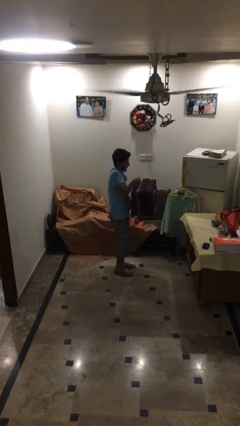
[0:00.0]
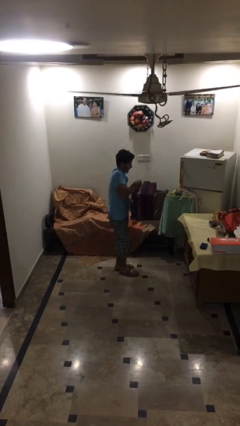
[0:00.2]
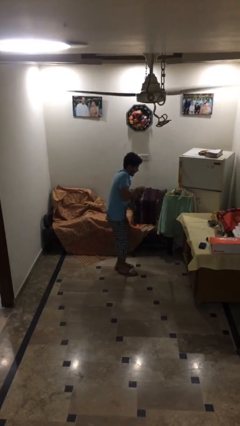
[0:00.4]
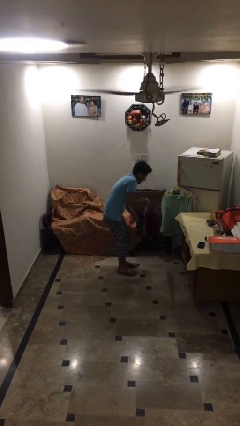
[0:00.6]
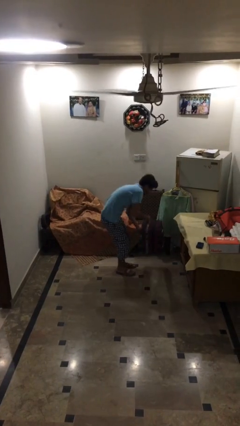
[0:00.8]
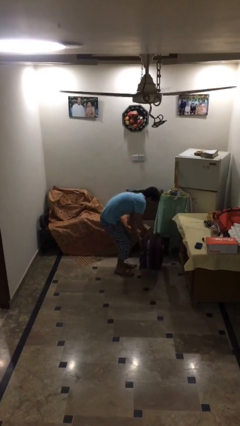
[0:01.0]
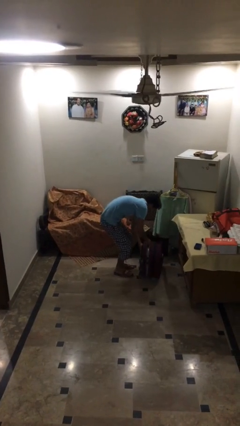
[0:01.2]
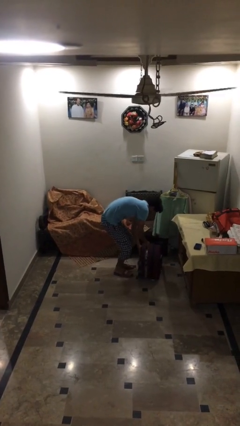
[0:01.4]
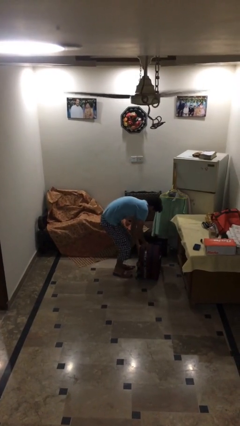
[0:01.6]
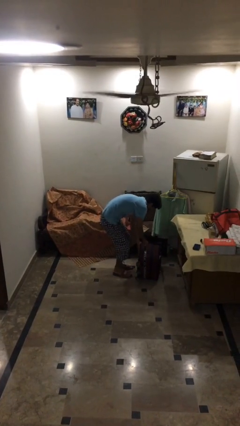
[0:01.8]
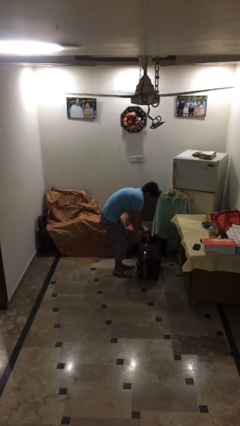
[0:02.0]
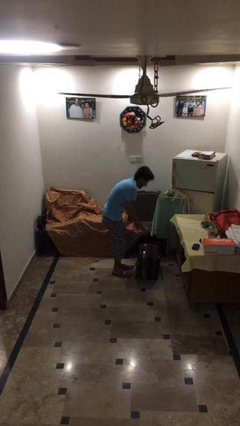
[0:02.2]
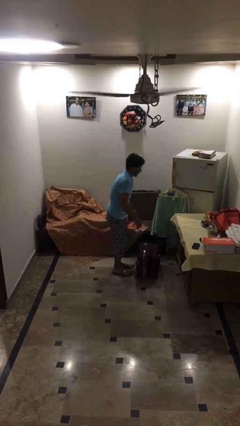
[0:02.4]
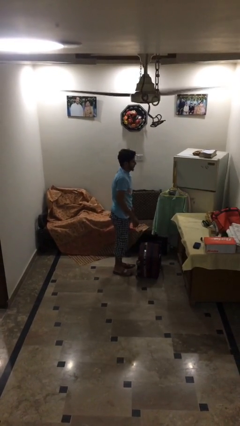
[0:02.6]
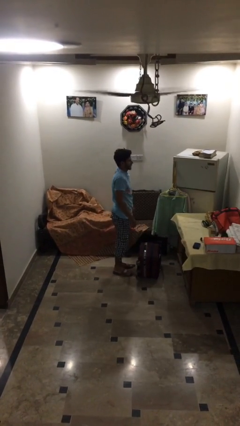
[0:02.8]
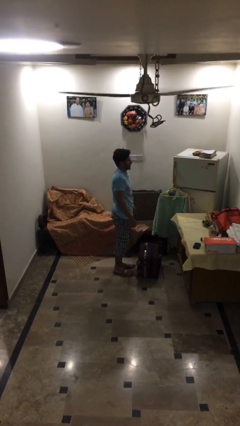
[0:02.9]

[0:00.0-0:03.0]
person puts down object on floor

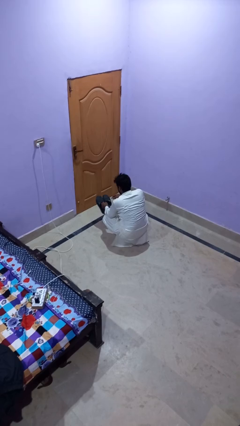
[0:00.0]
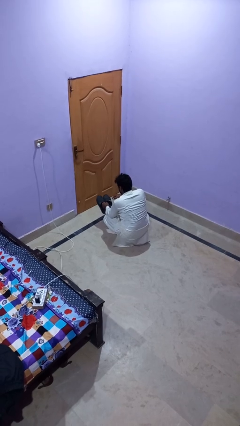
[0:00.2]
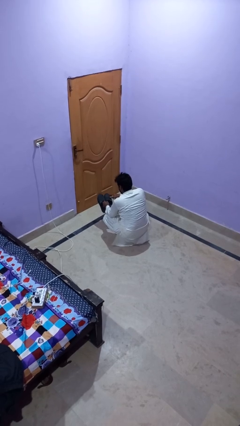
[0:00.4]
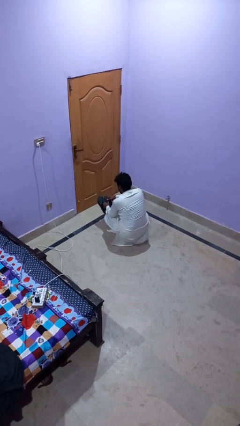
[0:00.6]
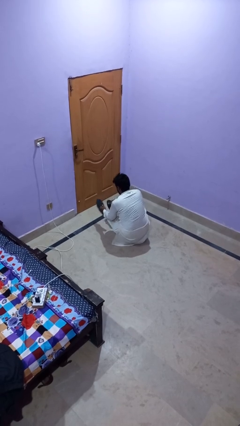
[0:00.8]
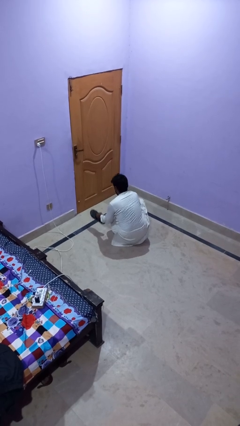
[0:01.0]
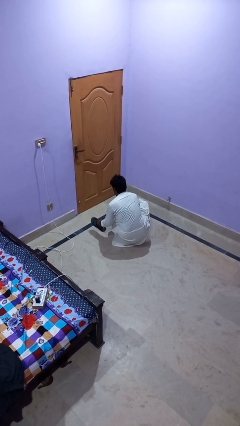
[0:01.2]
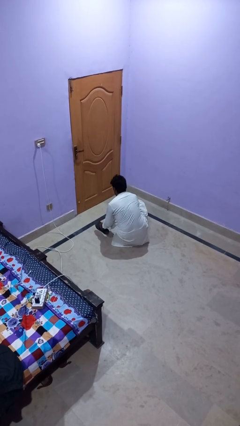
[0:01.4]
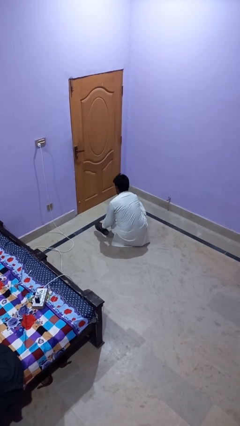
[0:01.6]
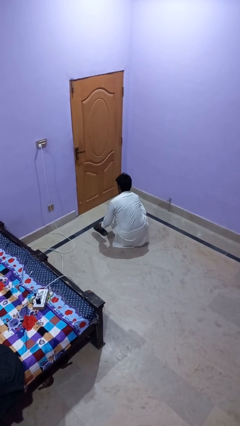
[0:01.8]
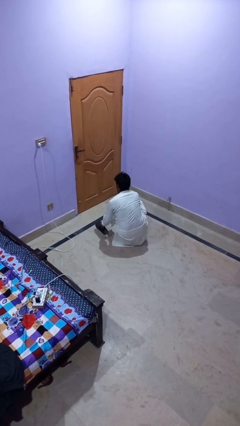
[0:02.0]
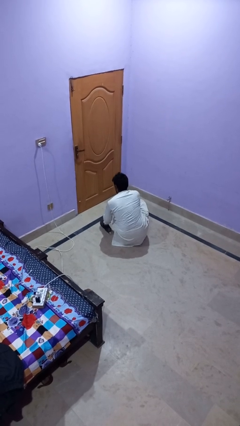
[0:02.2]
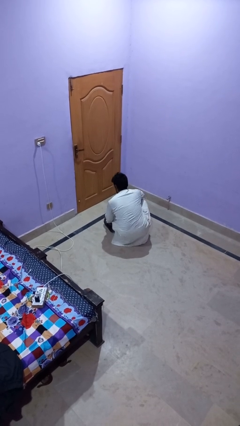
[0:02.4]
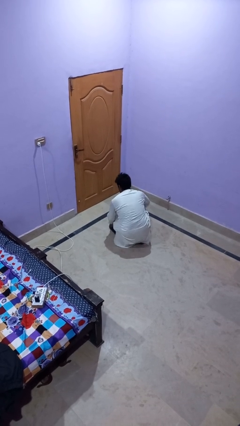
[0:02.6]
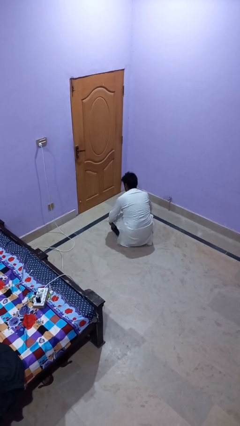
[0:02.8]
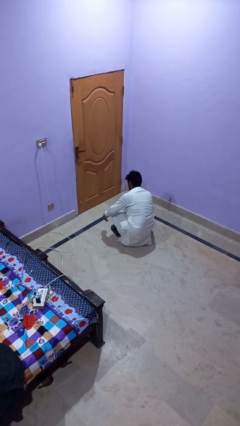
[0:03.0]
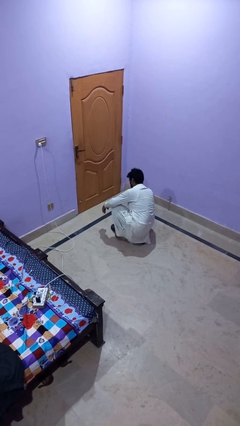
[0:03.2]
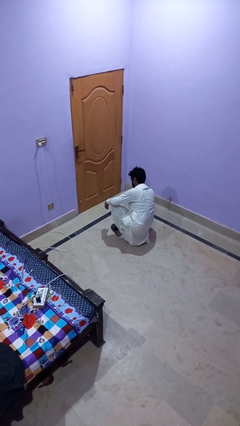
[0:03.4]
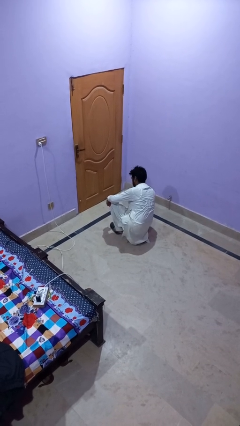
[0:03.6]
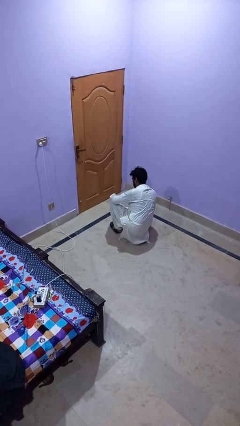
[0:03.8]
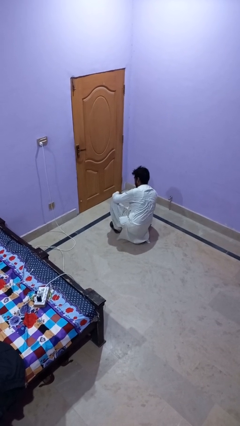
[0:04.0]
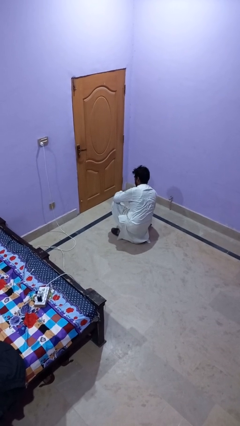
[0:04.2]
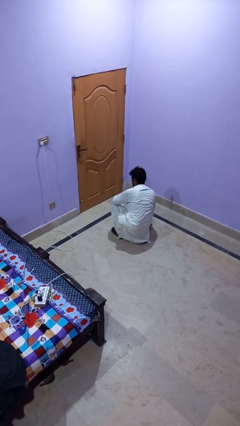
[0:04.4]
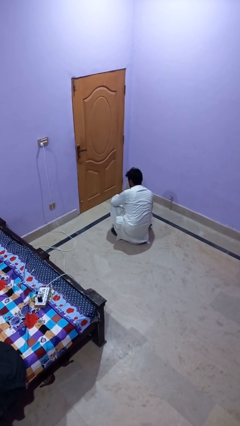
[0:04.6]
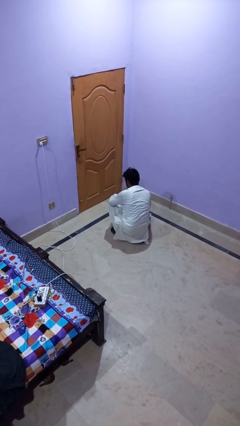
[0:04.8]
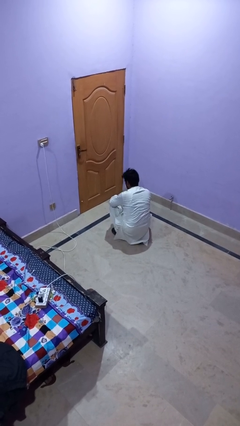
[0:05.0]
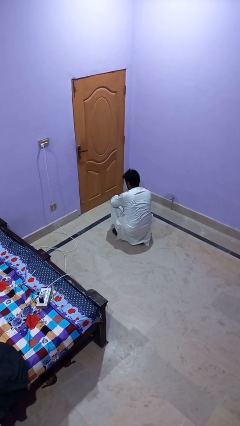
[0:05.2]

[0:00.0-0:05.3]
person puts on shoes

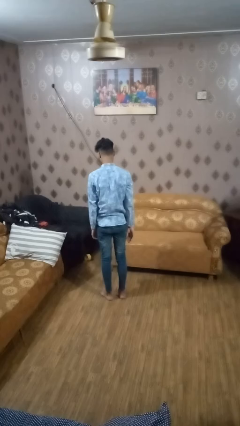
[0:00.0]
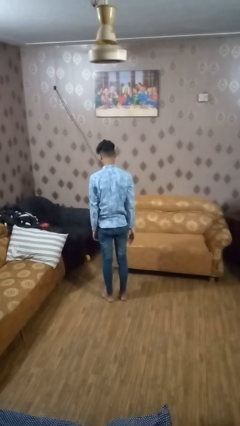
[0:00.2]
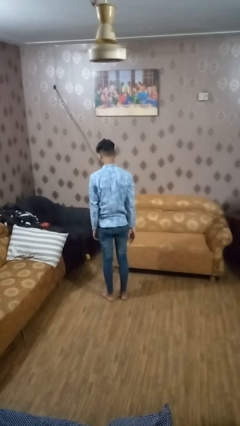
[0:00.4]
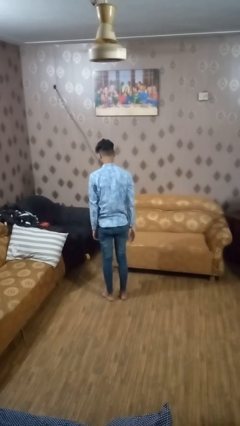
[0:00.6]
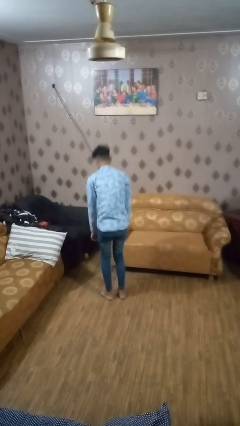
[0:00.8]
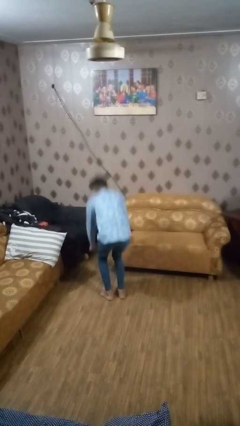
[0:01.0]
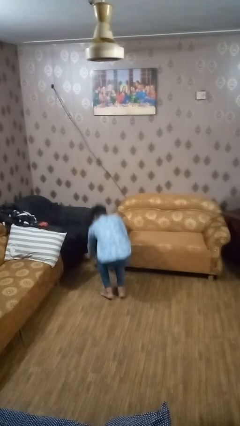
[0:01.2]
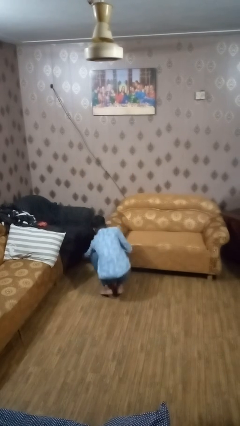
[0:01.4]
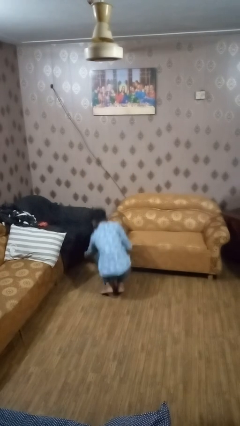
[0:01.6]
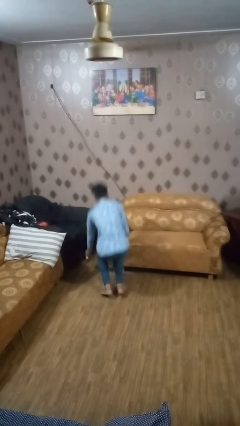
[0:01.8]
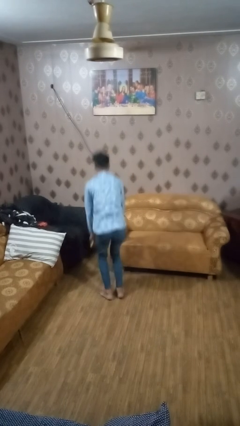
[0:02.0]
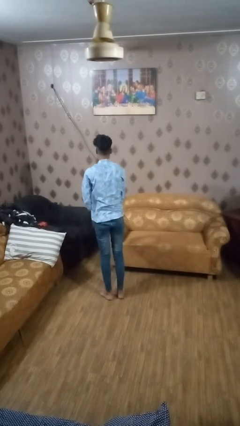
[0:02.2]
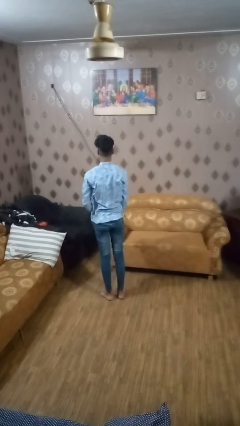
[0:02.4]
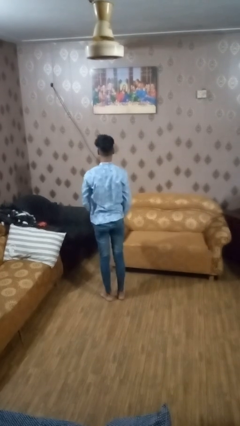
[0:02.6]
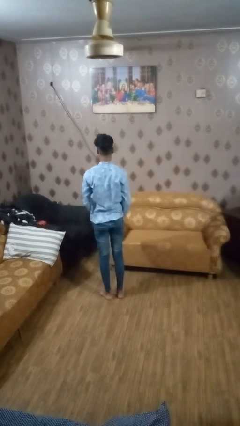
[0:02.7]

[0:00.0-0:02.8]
person picks up object from floor

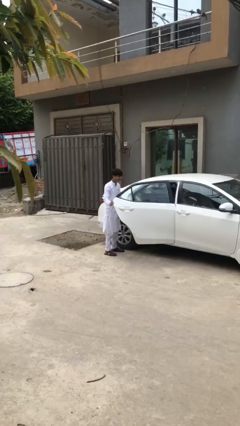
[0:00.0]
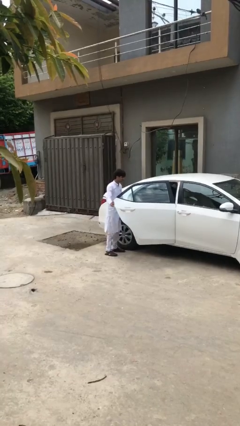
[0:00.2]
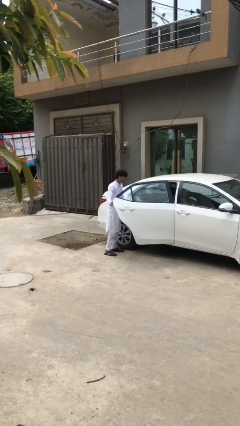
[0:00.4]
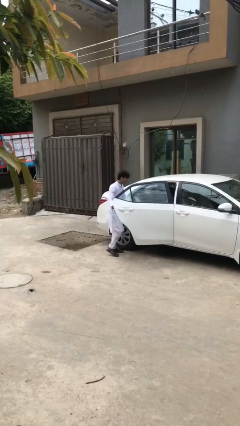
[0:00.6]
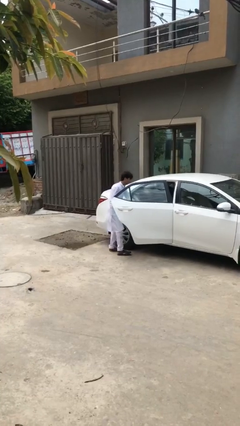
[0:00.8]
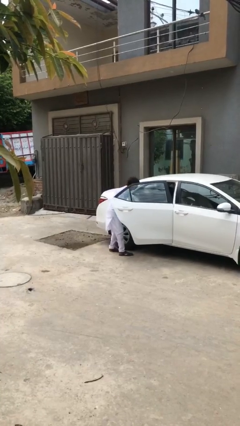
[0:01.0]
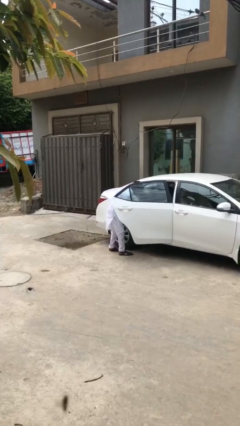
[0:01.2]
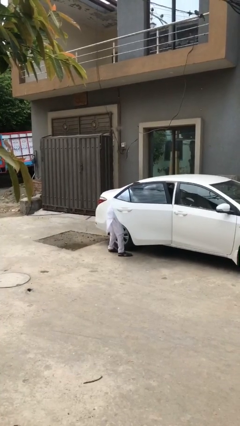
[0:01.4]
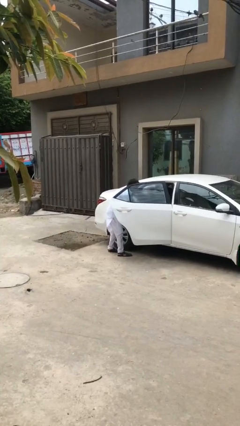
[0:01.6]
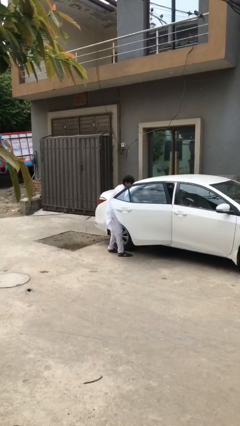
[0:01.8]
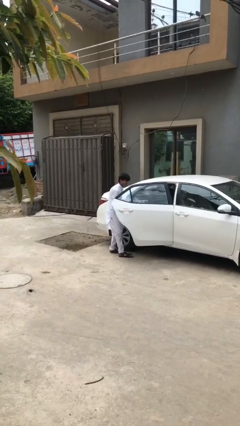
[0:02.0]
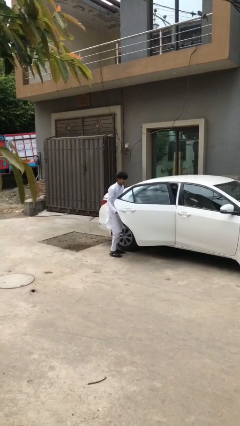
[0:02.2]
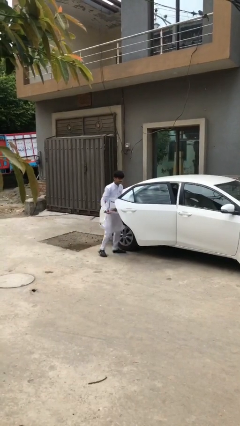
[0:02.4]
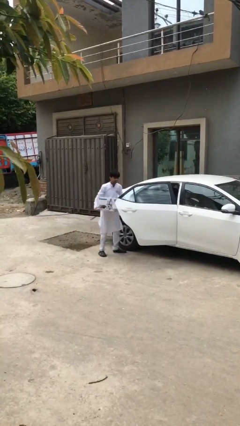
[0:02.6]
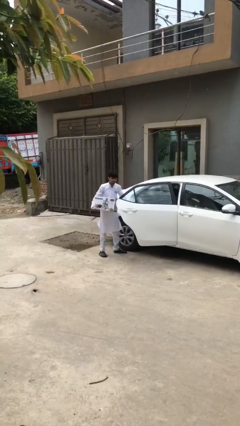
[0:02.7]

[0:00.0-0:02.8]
person unloads car

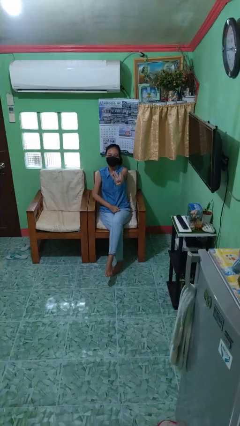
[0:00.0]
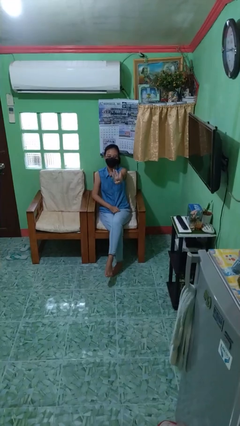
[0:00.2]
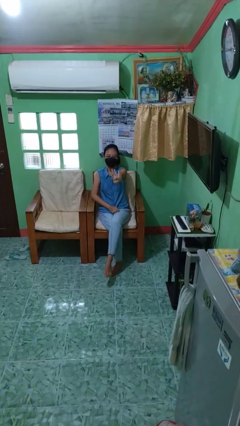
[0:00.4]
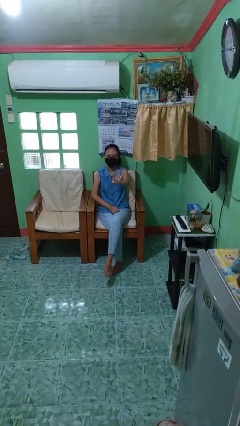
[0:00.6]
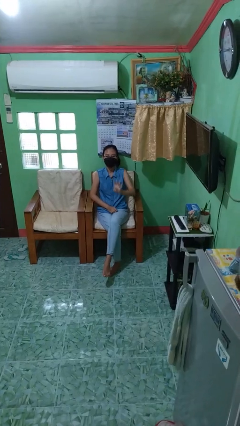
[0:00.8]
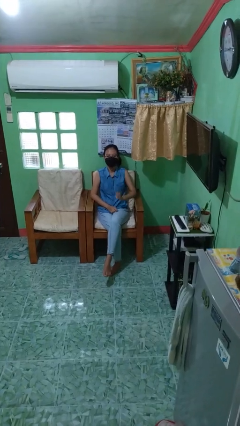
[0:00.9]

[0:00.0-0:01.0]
person gestures number four

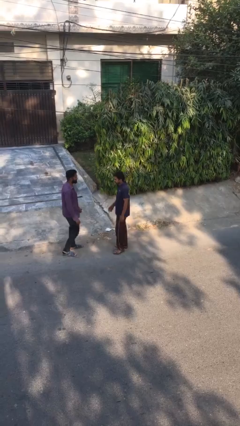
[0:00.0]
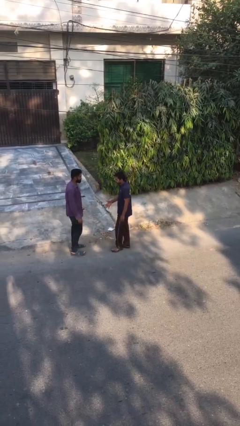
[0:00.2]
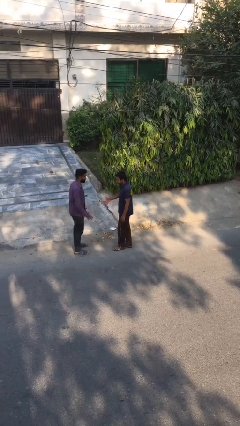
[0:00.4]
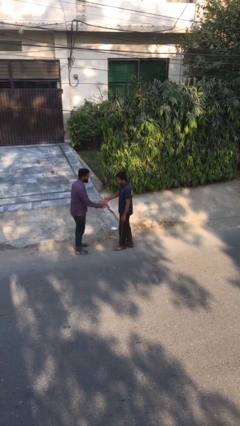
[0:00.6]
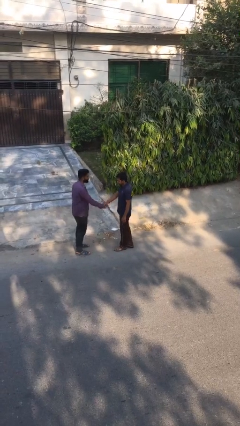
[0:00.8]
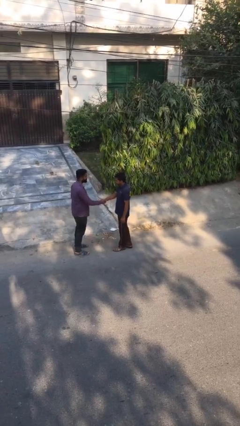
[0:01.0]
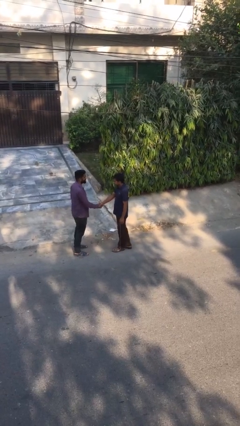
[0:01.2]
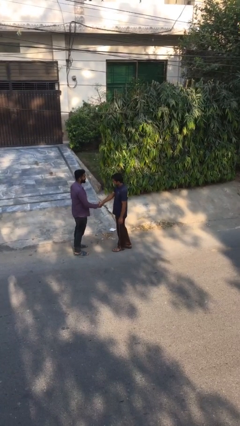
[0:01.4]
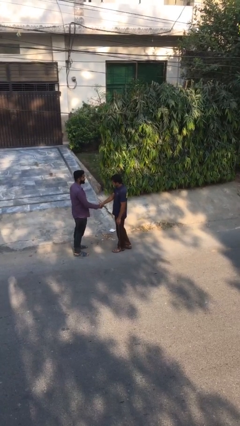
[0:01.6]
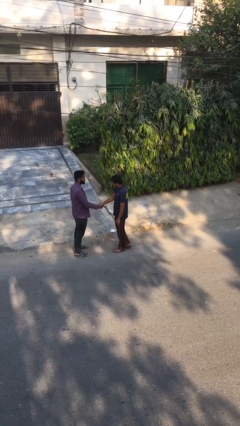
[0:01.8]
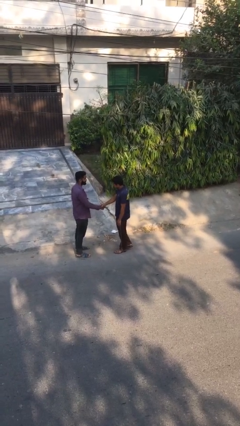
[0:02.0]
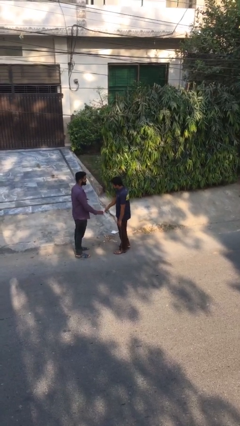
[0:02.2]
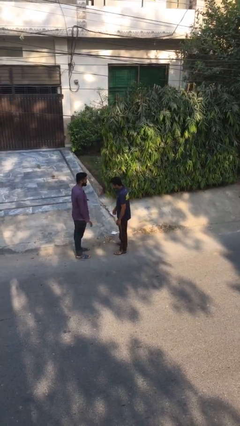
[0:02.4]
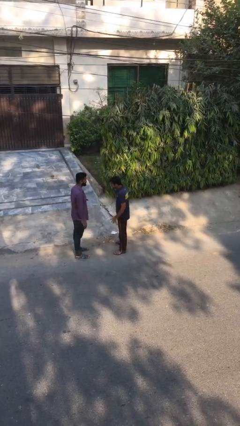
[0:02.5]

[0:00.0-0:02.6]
person shakes hand

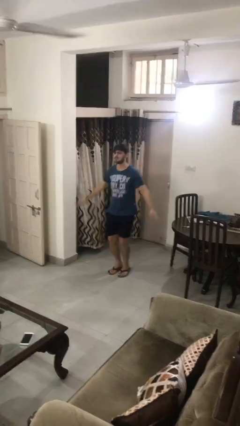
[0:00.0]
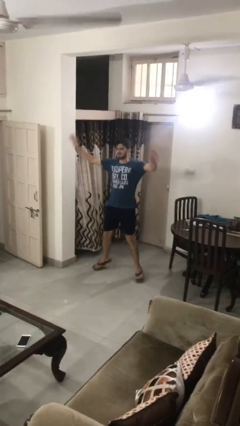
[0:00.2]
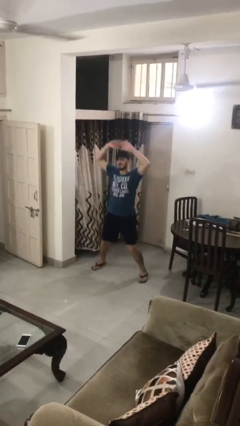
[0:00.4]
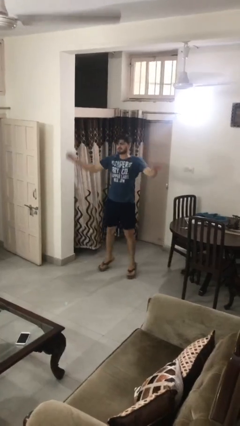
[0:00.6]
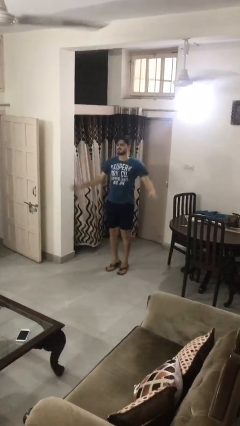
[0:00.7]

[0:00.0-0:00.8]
person exercises with jumping jacks
